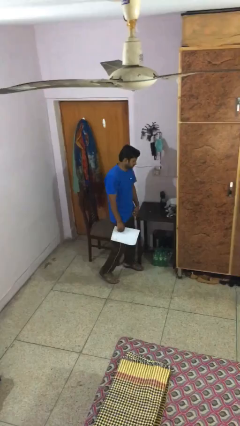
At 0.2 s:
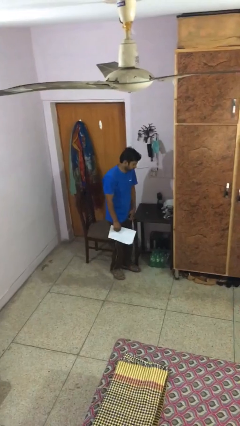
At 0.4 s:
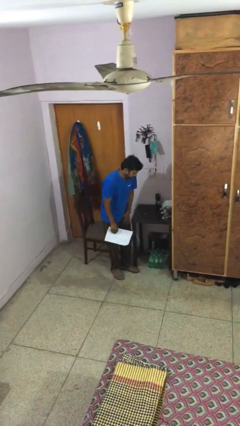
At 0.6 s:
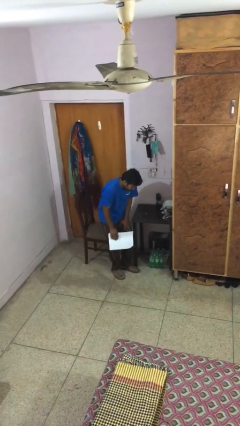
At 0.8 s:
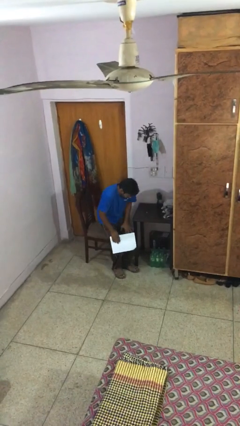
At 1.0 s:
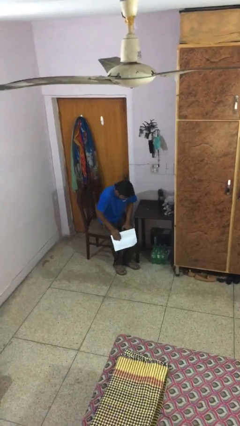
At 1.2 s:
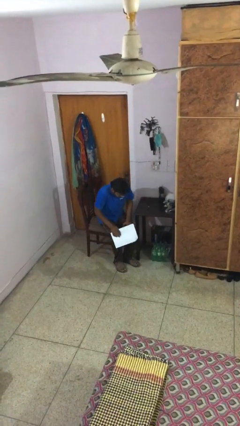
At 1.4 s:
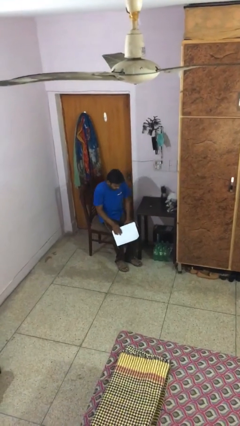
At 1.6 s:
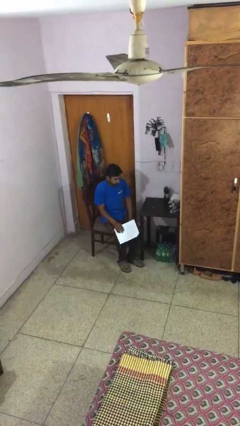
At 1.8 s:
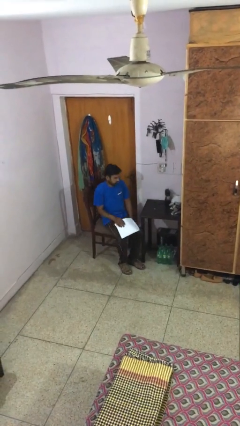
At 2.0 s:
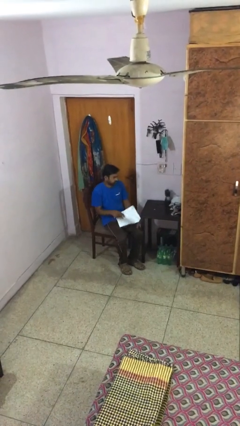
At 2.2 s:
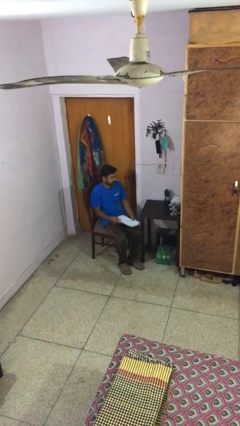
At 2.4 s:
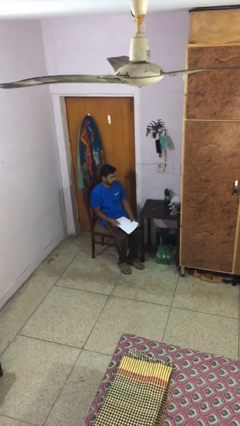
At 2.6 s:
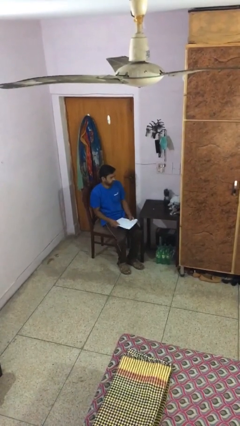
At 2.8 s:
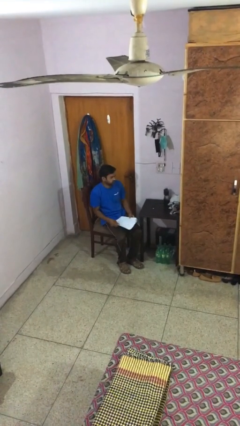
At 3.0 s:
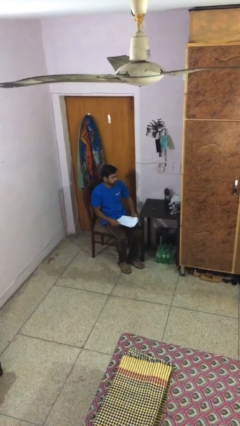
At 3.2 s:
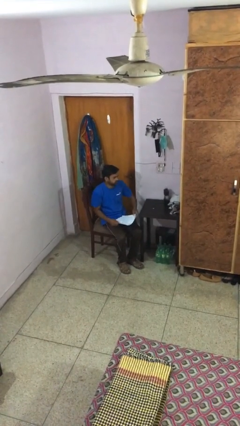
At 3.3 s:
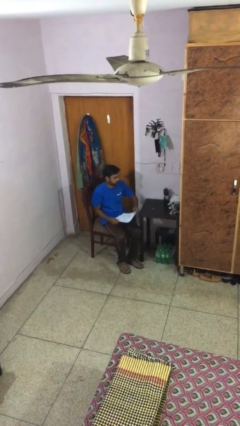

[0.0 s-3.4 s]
person sits down

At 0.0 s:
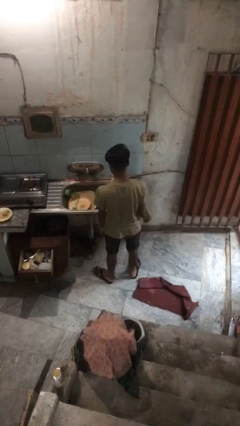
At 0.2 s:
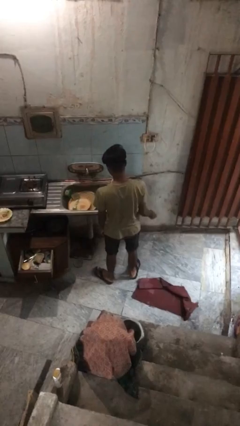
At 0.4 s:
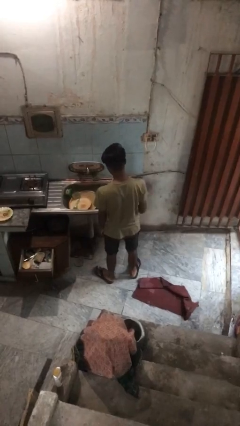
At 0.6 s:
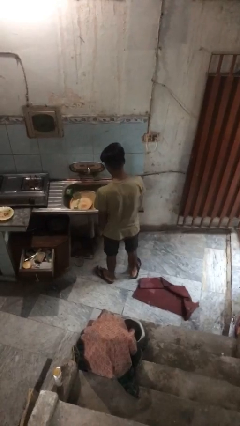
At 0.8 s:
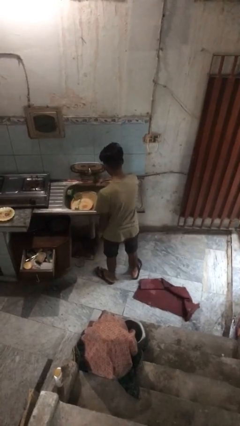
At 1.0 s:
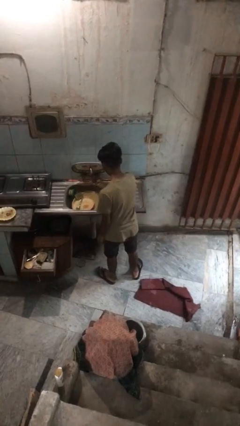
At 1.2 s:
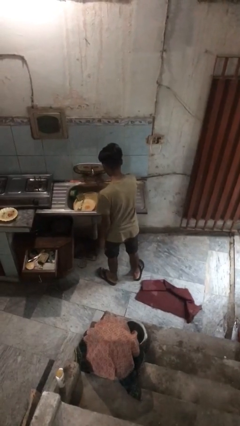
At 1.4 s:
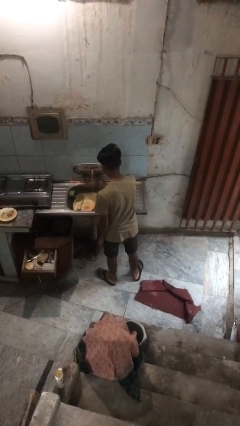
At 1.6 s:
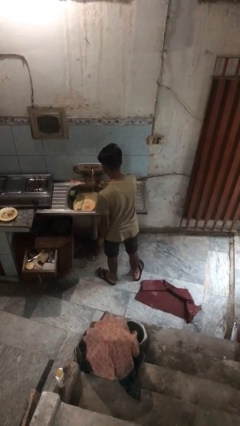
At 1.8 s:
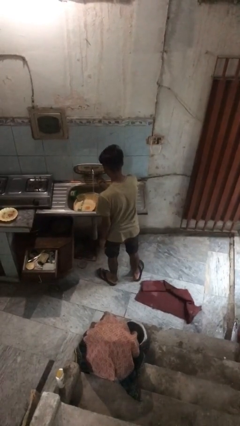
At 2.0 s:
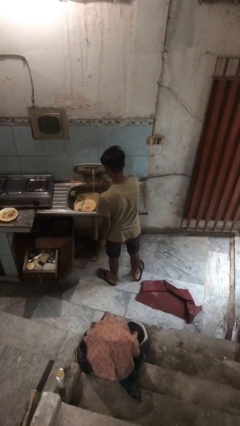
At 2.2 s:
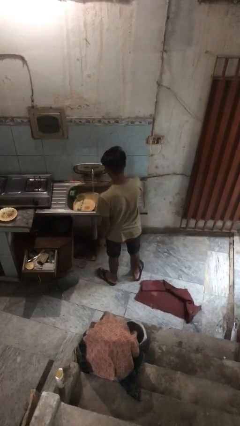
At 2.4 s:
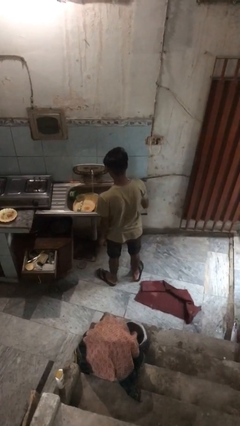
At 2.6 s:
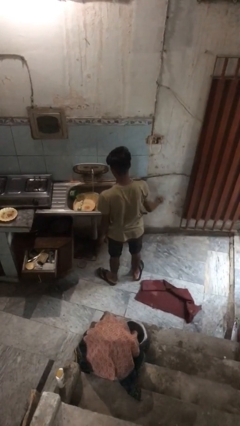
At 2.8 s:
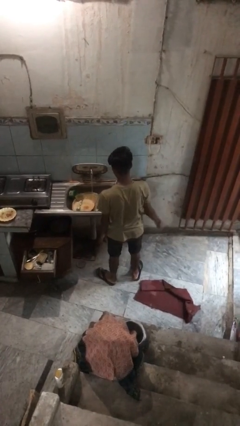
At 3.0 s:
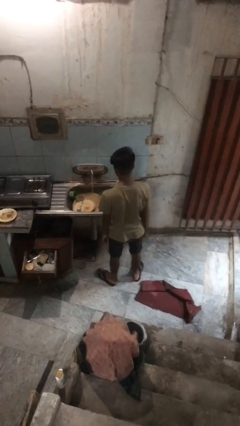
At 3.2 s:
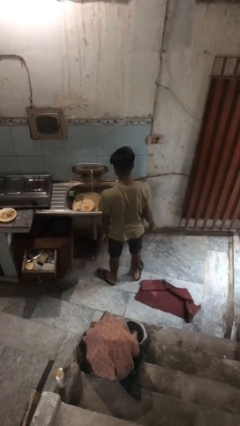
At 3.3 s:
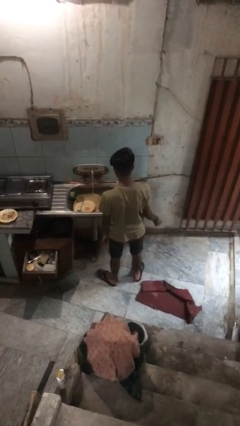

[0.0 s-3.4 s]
person turns on faucet

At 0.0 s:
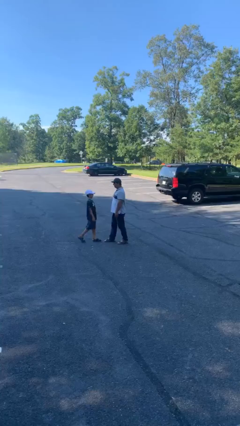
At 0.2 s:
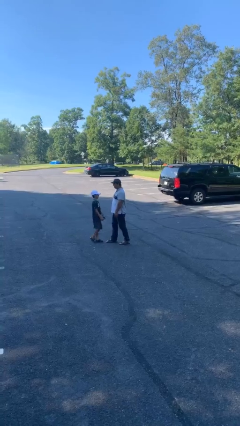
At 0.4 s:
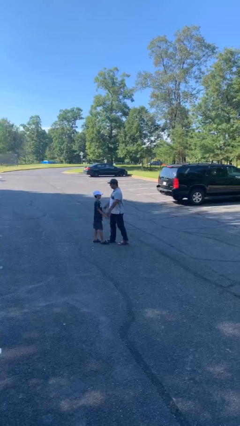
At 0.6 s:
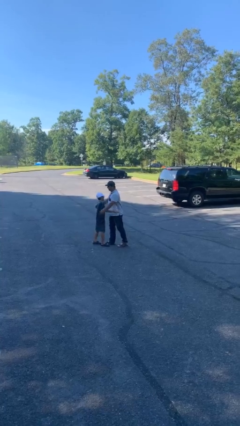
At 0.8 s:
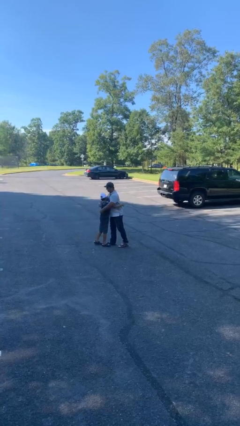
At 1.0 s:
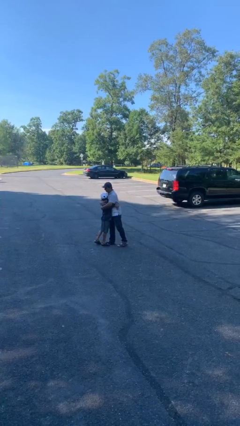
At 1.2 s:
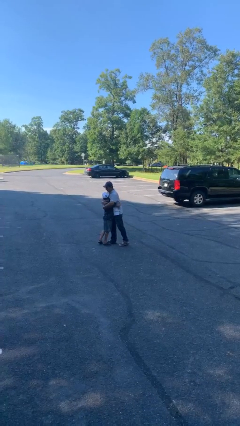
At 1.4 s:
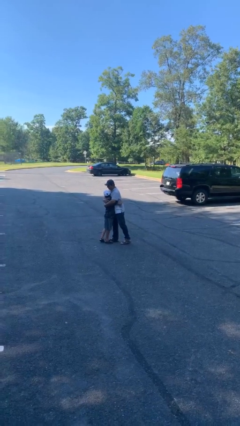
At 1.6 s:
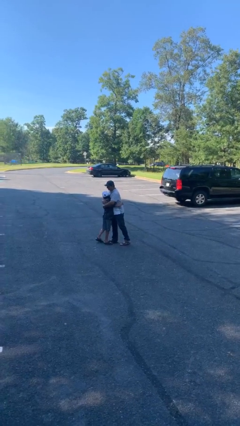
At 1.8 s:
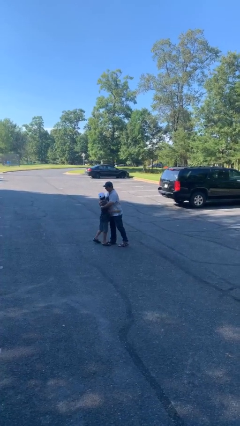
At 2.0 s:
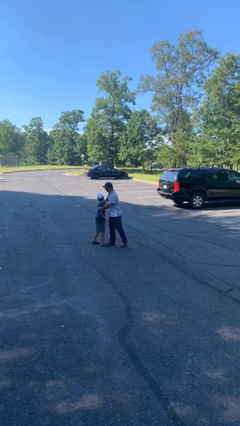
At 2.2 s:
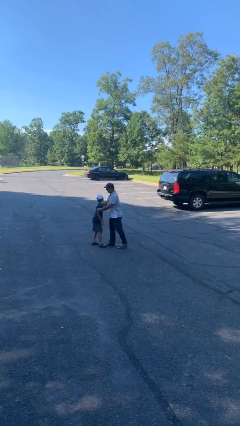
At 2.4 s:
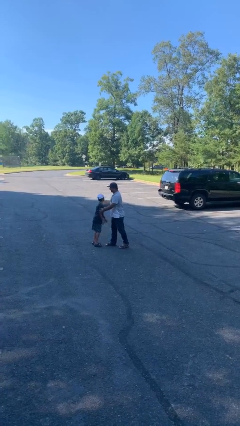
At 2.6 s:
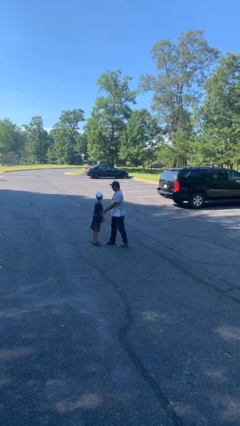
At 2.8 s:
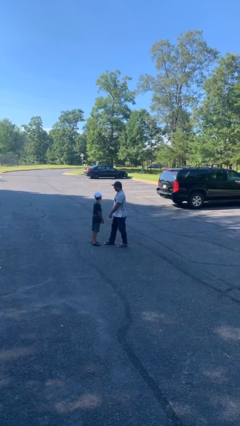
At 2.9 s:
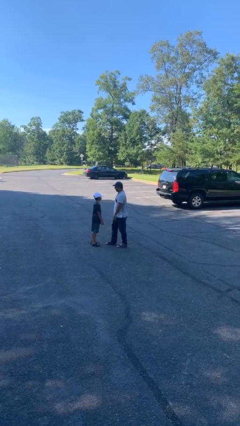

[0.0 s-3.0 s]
person embraces person

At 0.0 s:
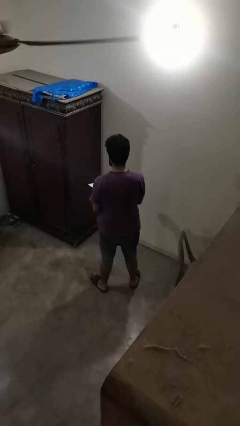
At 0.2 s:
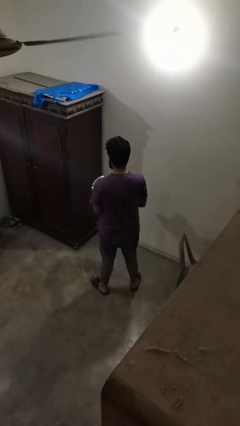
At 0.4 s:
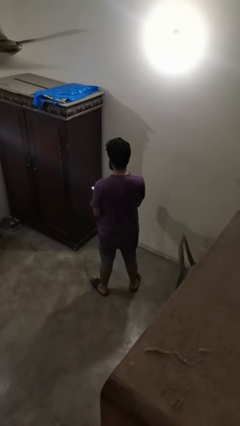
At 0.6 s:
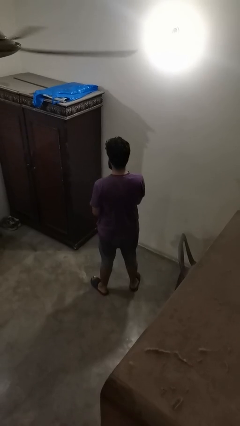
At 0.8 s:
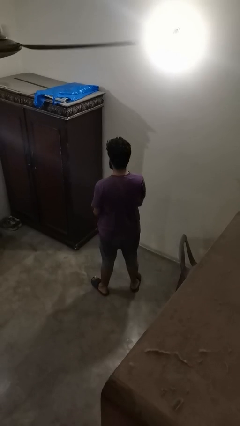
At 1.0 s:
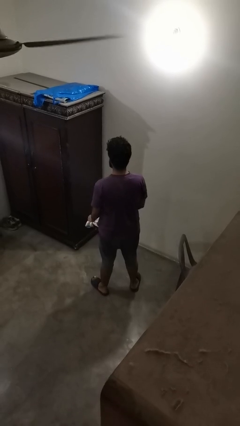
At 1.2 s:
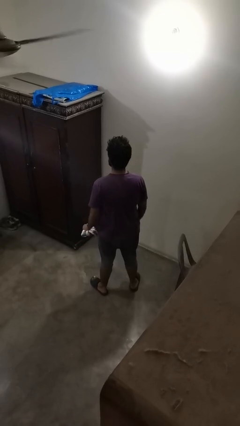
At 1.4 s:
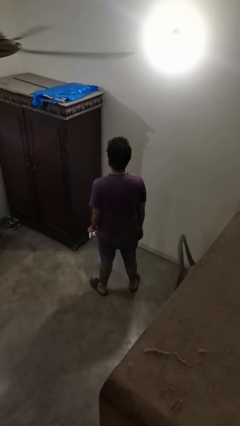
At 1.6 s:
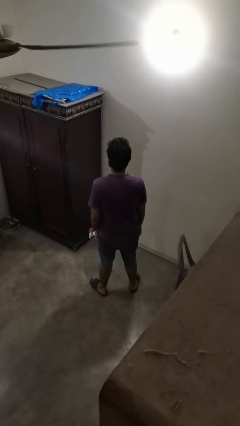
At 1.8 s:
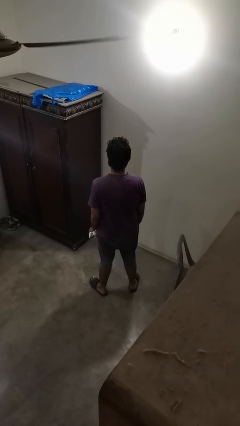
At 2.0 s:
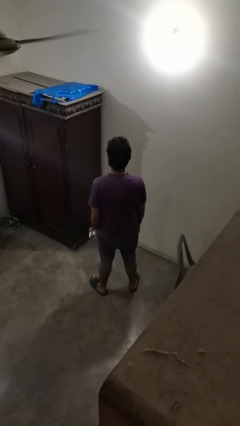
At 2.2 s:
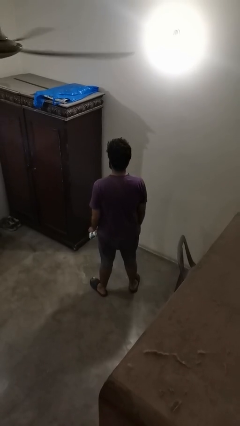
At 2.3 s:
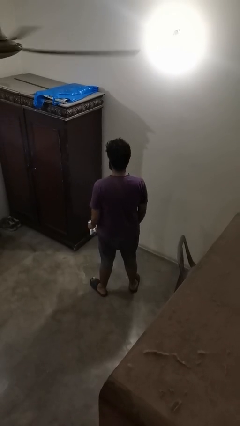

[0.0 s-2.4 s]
person crumples paper

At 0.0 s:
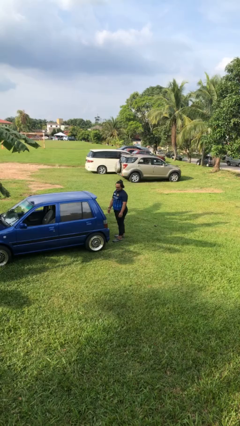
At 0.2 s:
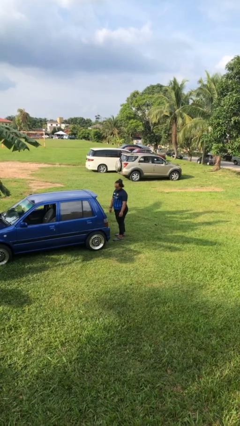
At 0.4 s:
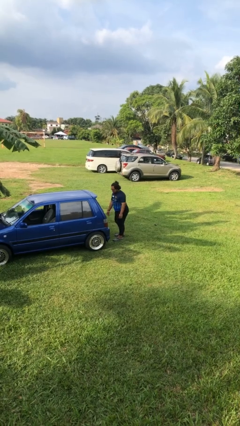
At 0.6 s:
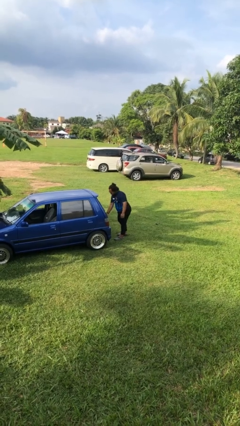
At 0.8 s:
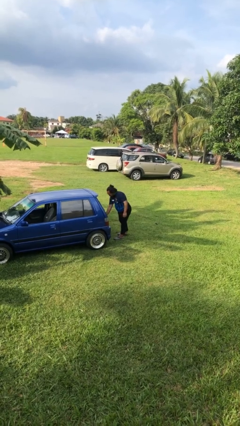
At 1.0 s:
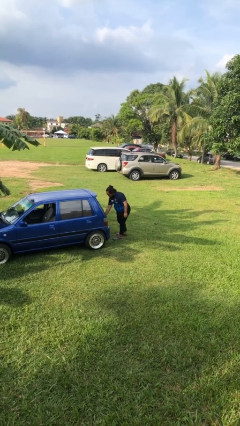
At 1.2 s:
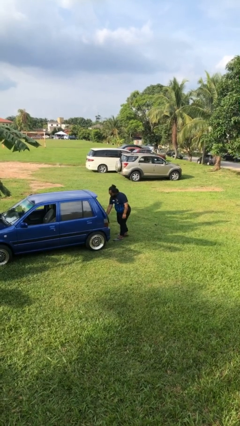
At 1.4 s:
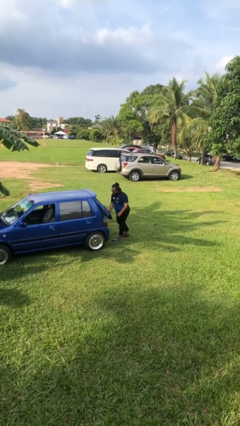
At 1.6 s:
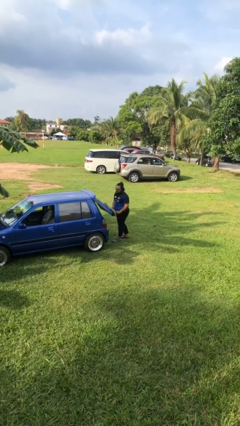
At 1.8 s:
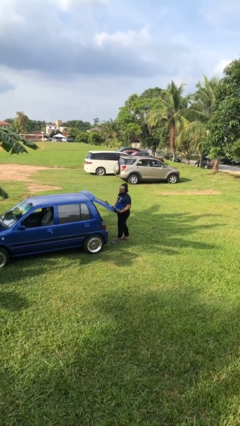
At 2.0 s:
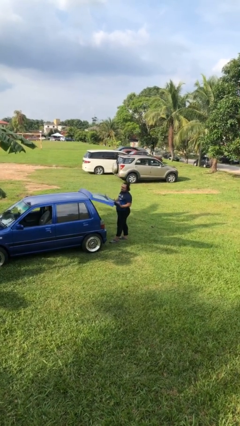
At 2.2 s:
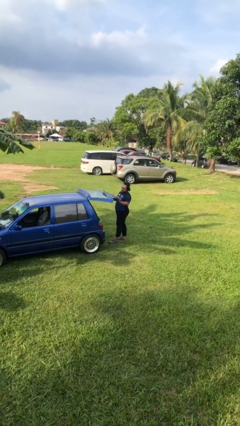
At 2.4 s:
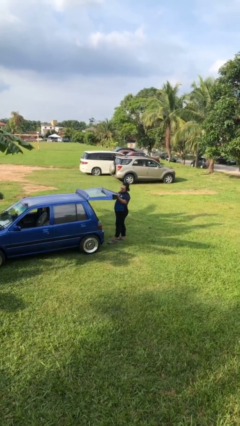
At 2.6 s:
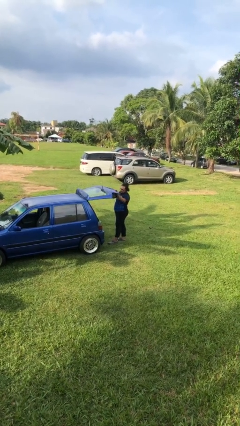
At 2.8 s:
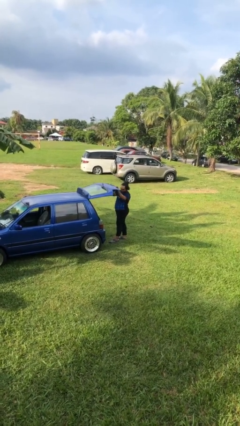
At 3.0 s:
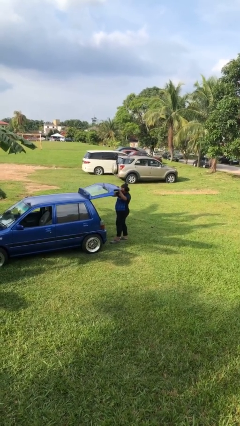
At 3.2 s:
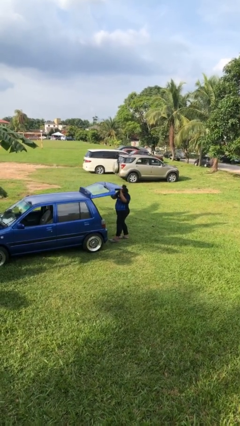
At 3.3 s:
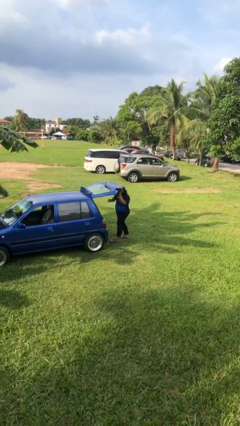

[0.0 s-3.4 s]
person opens car trunk

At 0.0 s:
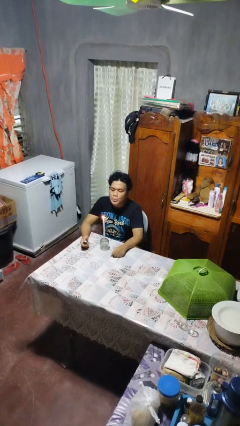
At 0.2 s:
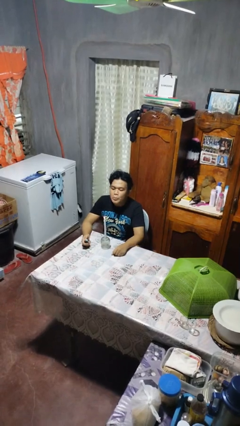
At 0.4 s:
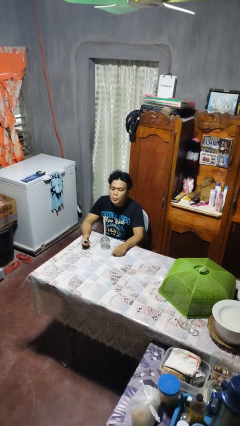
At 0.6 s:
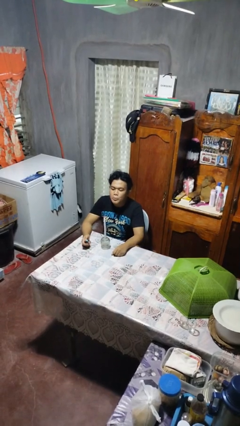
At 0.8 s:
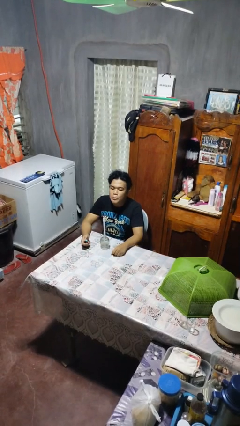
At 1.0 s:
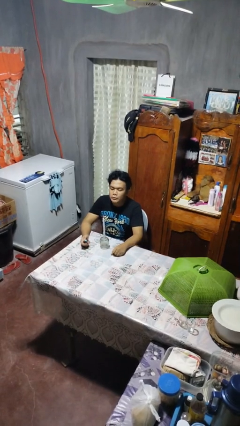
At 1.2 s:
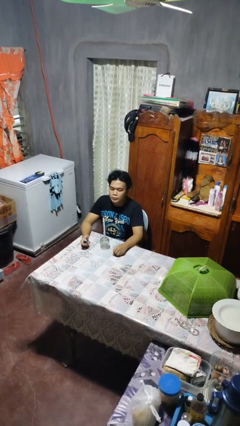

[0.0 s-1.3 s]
person extinguishes candle

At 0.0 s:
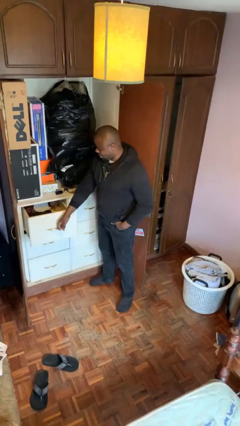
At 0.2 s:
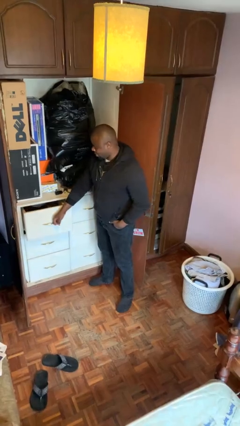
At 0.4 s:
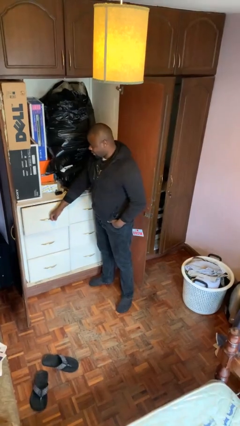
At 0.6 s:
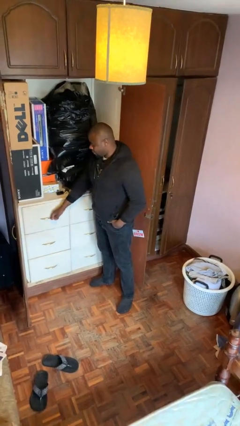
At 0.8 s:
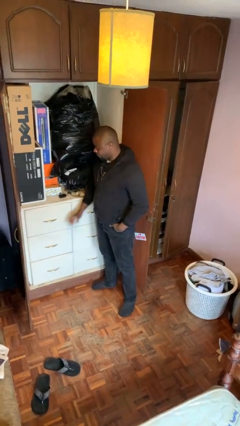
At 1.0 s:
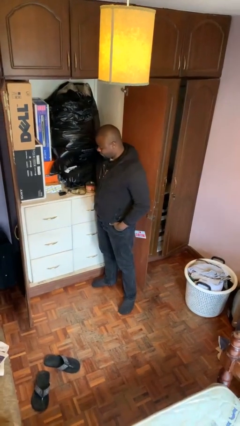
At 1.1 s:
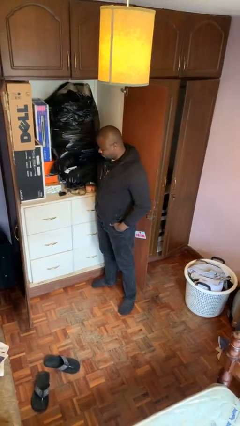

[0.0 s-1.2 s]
person closes dresser drawer
